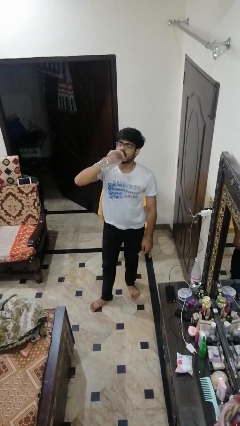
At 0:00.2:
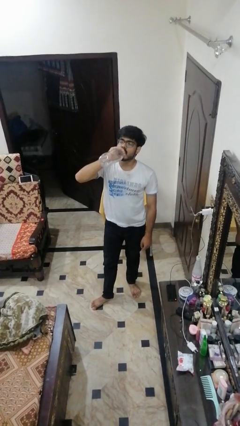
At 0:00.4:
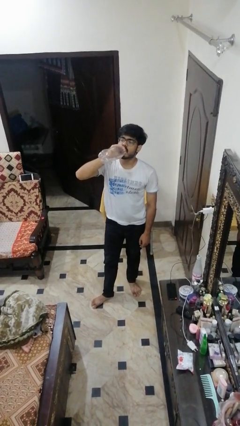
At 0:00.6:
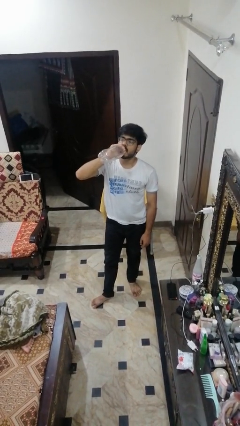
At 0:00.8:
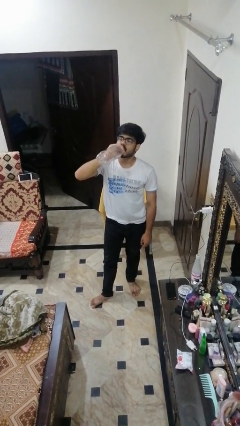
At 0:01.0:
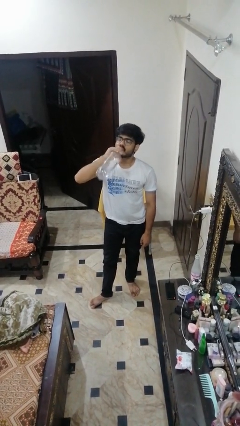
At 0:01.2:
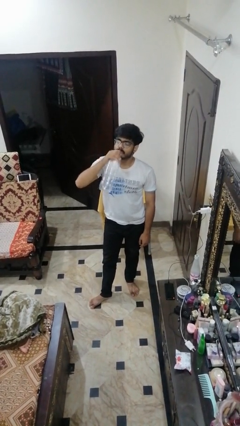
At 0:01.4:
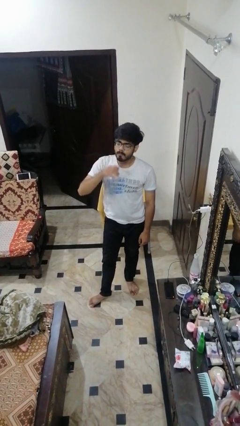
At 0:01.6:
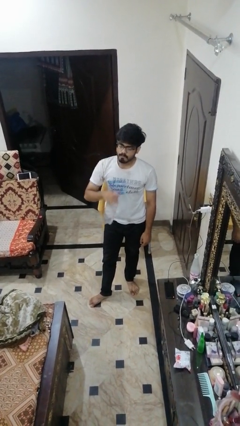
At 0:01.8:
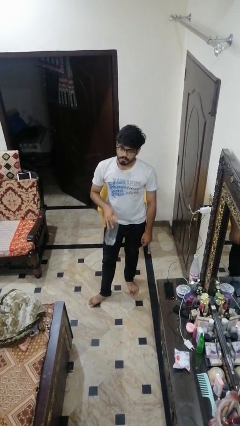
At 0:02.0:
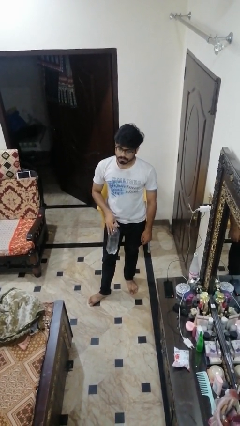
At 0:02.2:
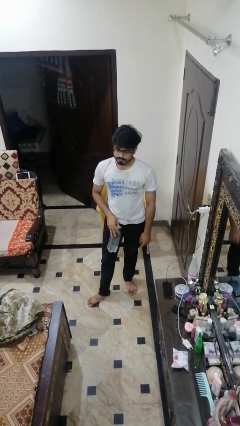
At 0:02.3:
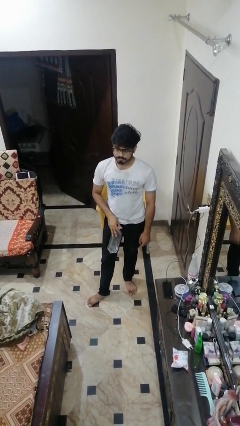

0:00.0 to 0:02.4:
person picks up object from floor

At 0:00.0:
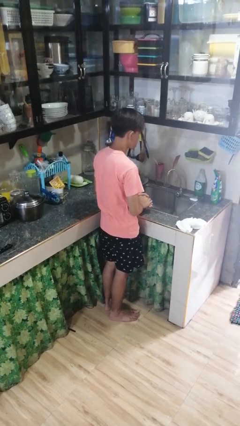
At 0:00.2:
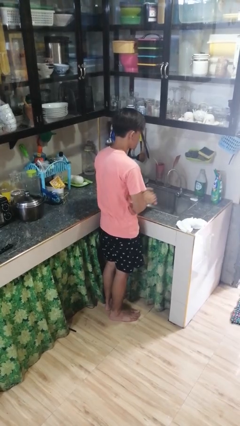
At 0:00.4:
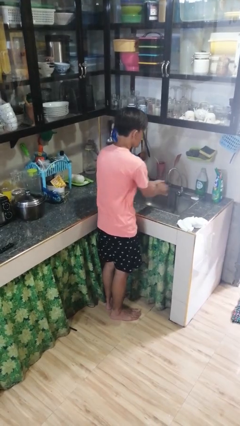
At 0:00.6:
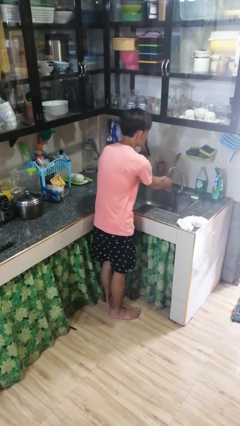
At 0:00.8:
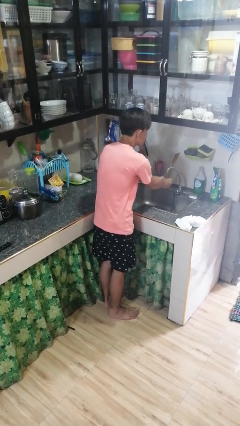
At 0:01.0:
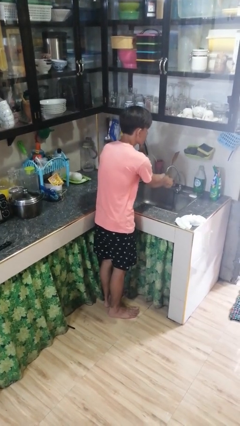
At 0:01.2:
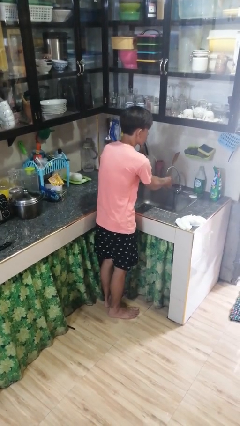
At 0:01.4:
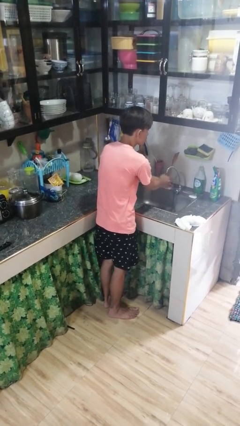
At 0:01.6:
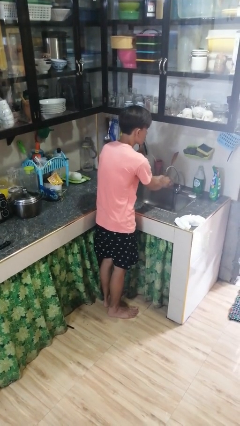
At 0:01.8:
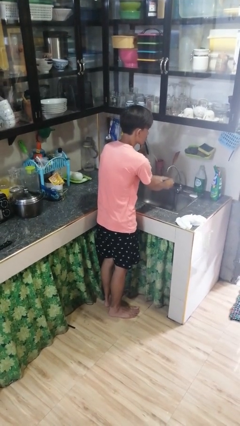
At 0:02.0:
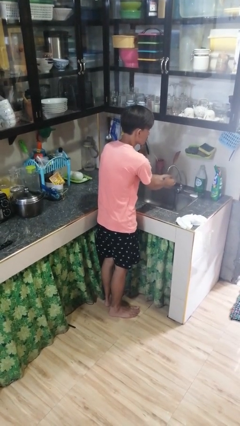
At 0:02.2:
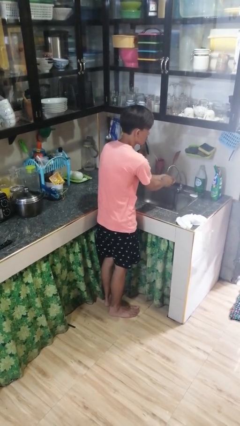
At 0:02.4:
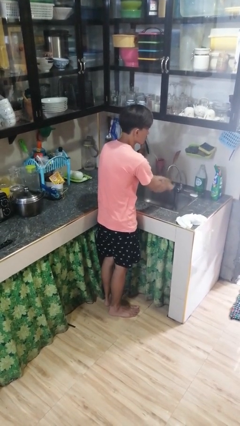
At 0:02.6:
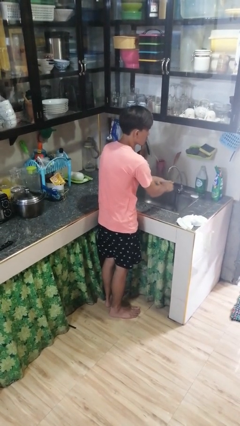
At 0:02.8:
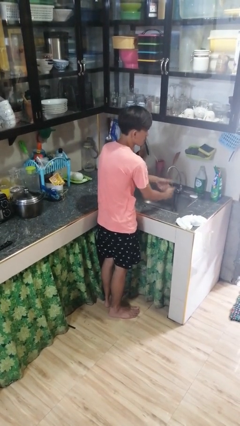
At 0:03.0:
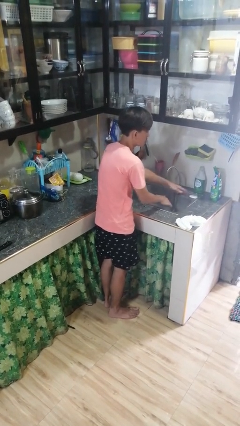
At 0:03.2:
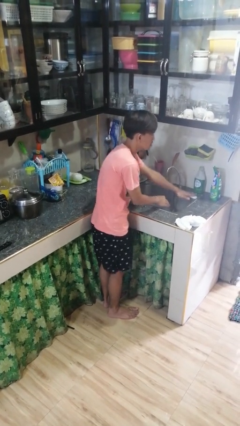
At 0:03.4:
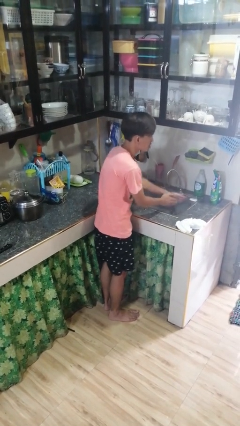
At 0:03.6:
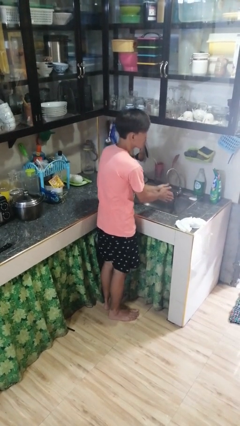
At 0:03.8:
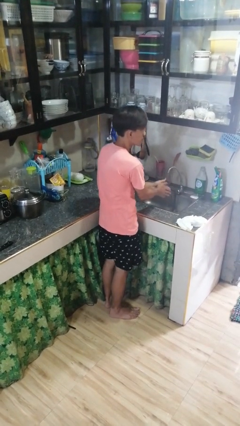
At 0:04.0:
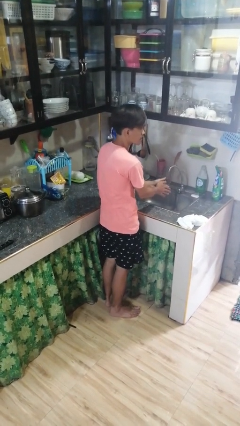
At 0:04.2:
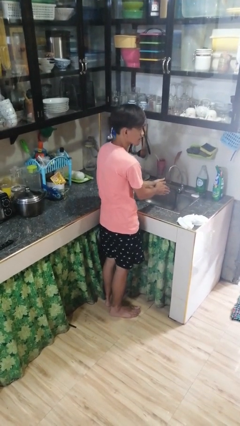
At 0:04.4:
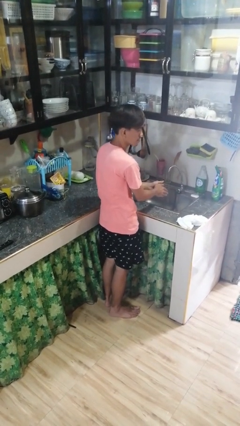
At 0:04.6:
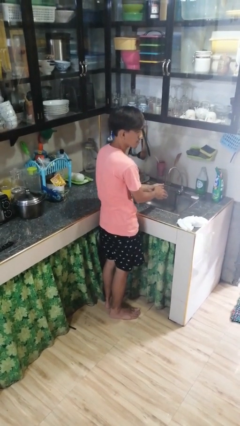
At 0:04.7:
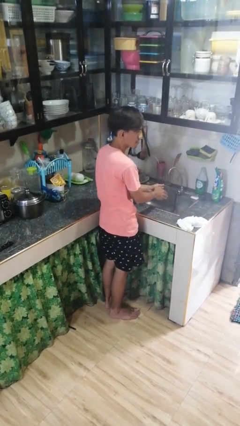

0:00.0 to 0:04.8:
person washes hands

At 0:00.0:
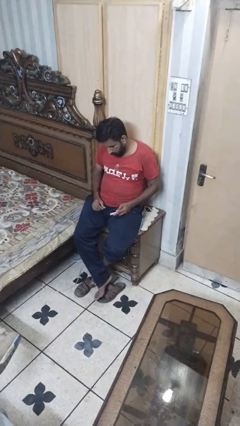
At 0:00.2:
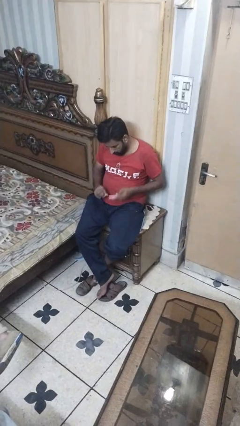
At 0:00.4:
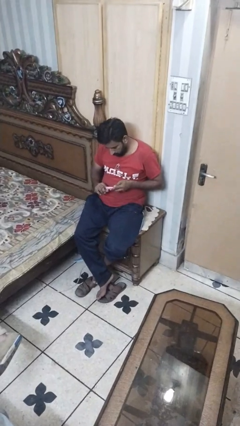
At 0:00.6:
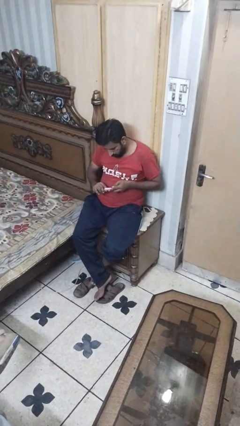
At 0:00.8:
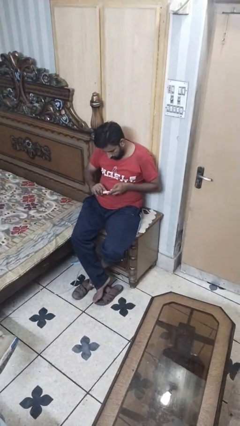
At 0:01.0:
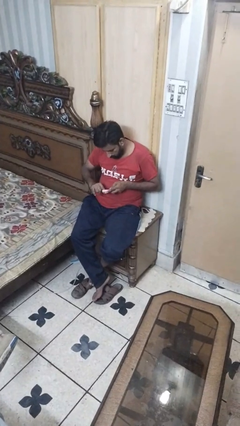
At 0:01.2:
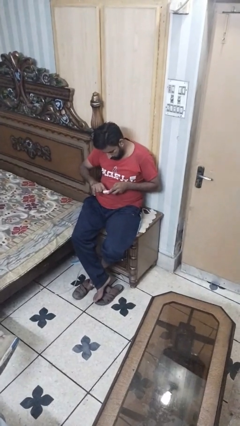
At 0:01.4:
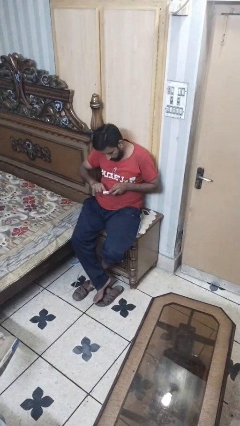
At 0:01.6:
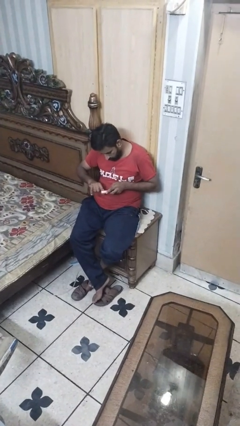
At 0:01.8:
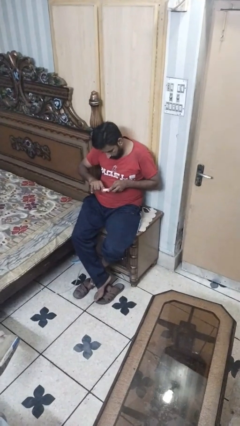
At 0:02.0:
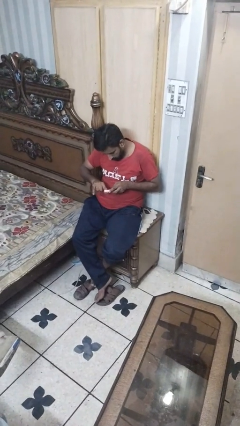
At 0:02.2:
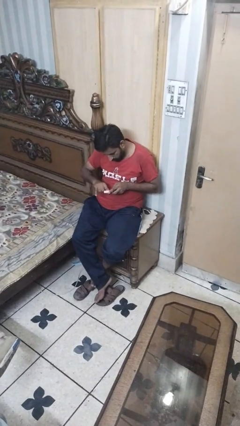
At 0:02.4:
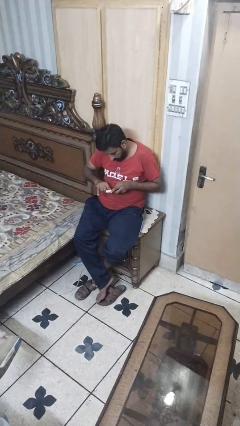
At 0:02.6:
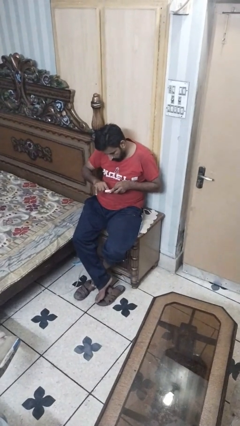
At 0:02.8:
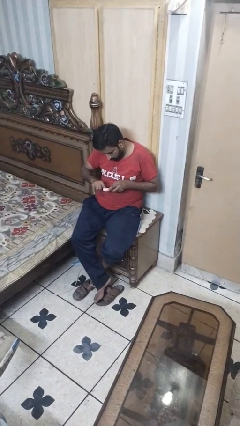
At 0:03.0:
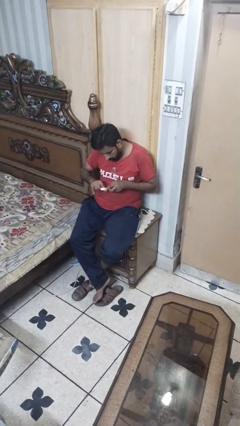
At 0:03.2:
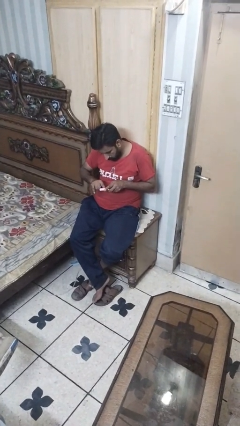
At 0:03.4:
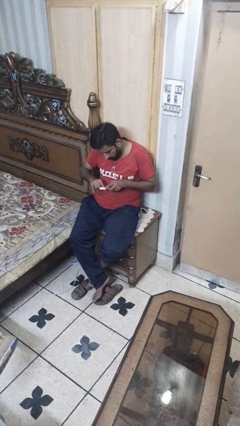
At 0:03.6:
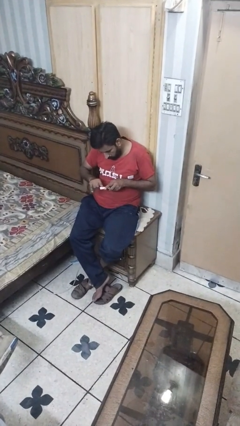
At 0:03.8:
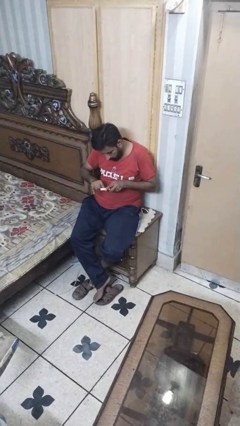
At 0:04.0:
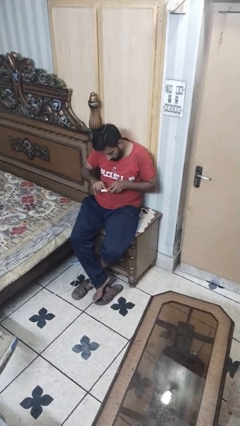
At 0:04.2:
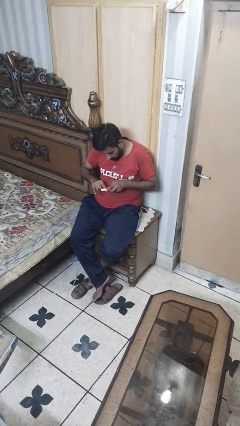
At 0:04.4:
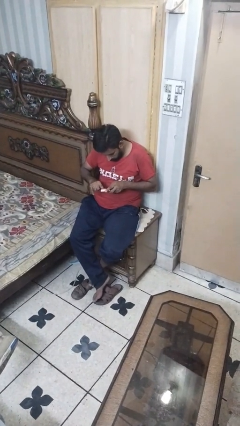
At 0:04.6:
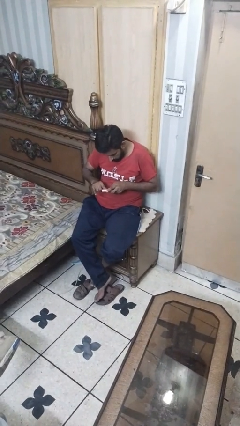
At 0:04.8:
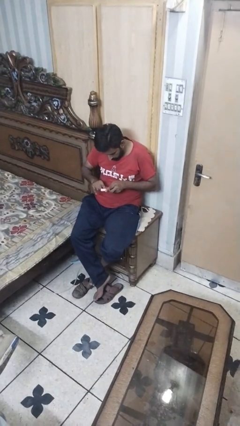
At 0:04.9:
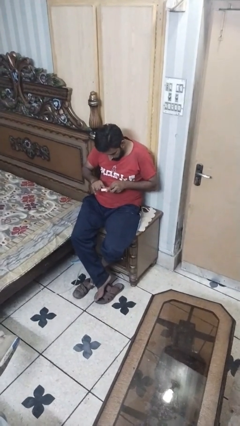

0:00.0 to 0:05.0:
person files fingernails

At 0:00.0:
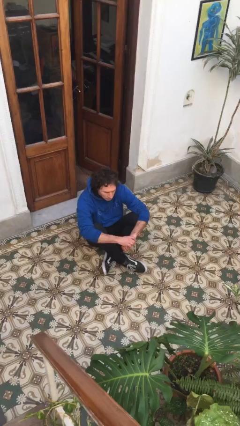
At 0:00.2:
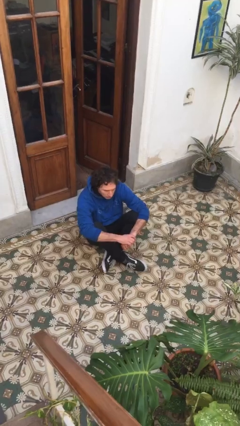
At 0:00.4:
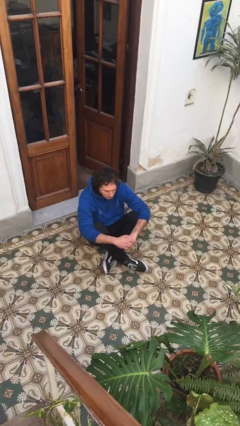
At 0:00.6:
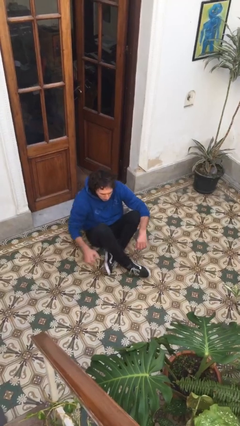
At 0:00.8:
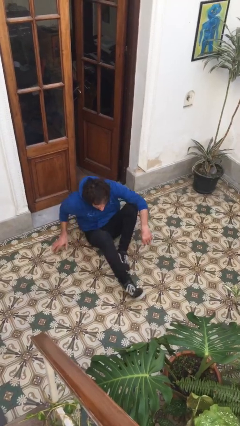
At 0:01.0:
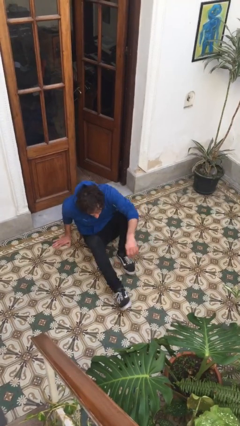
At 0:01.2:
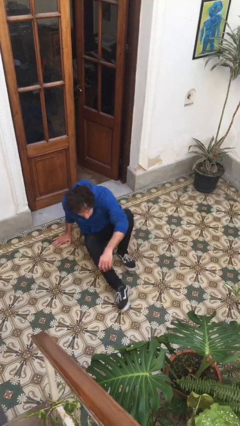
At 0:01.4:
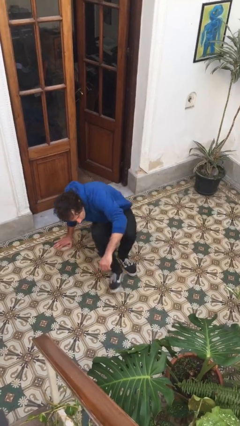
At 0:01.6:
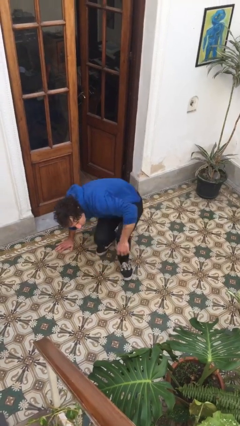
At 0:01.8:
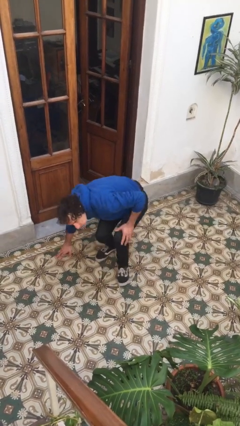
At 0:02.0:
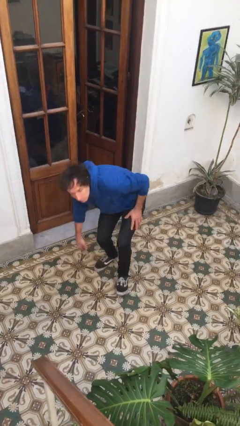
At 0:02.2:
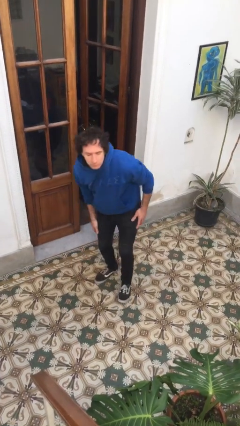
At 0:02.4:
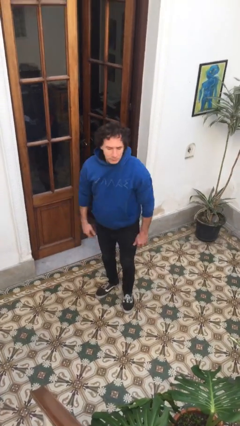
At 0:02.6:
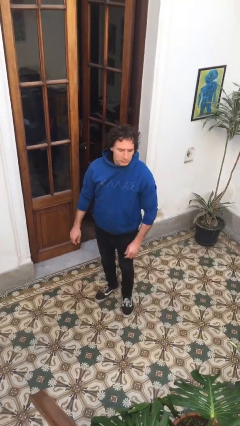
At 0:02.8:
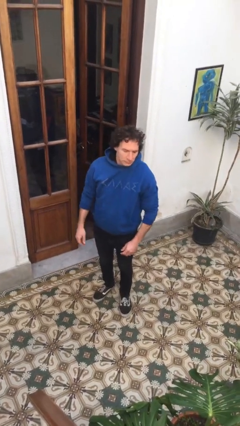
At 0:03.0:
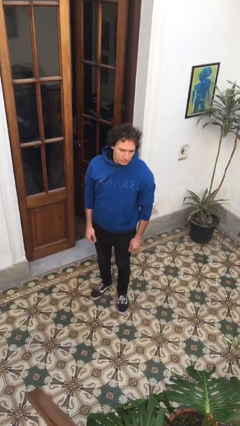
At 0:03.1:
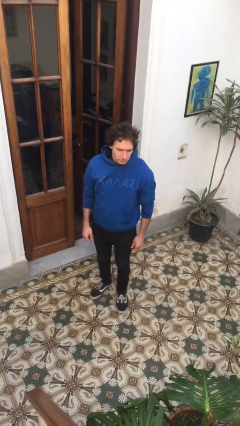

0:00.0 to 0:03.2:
person stands up from floor

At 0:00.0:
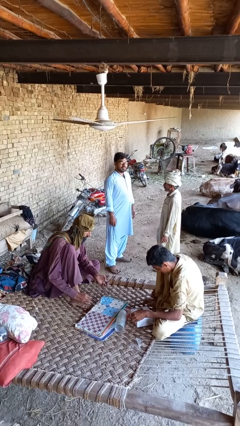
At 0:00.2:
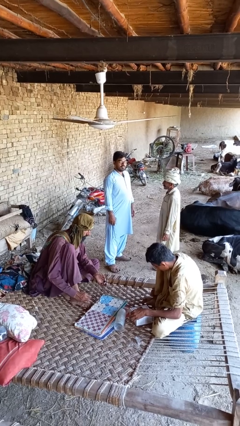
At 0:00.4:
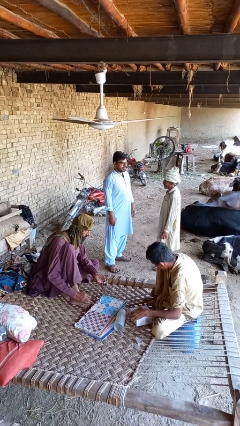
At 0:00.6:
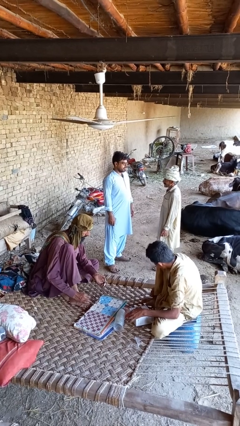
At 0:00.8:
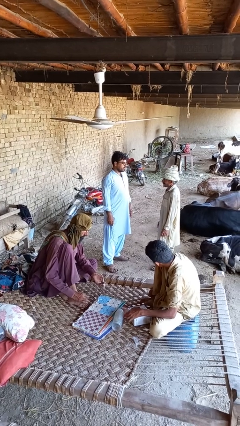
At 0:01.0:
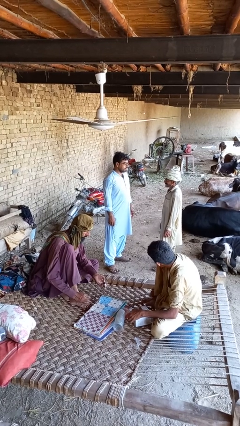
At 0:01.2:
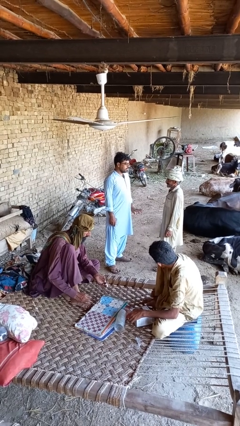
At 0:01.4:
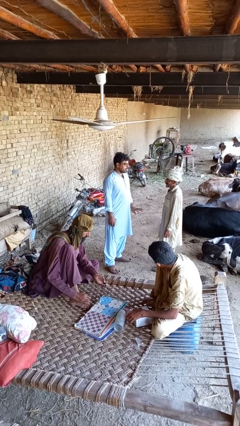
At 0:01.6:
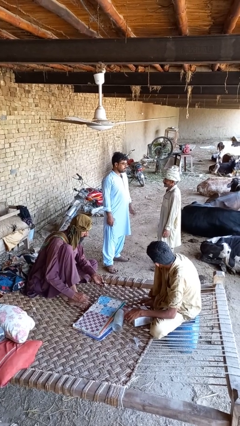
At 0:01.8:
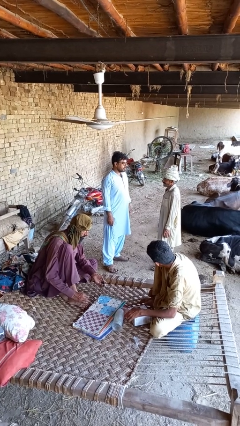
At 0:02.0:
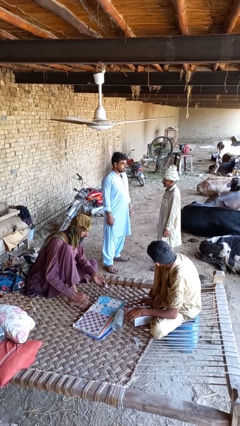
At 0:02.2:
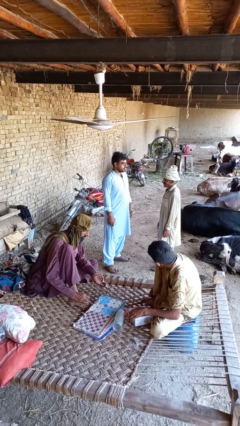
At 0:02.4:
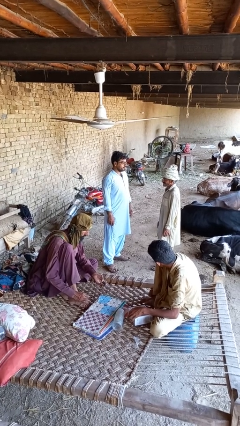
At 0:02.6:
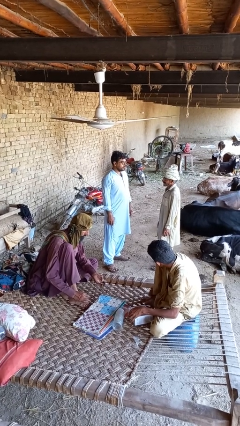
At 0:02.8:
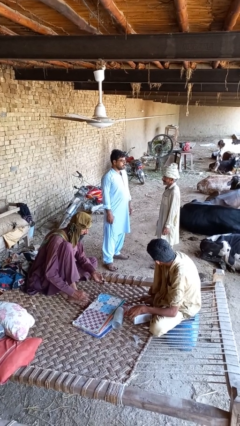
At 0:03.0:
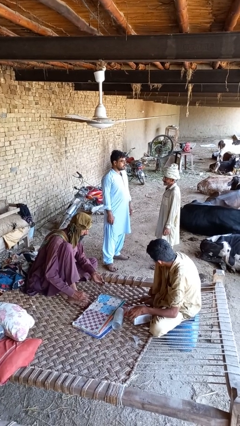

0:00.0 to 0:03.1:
person talks to person
